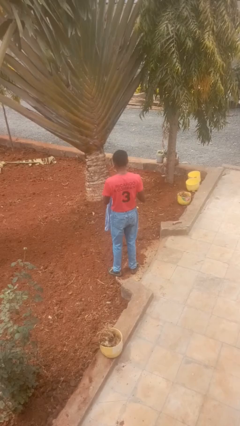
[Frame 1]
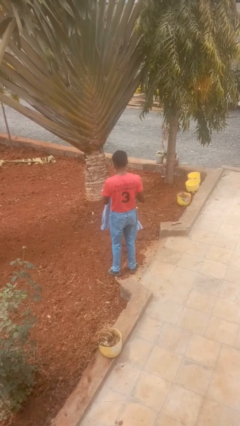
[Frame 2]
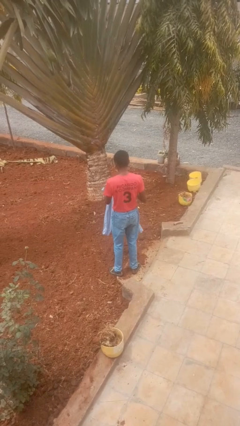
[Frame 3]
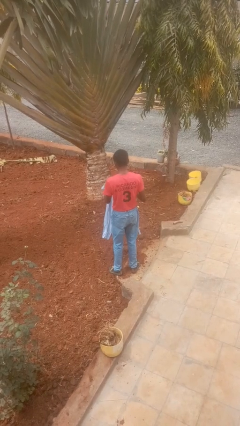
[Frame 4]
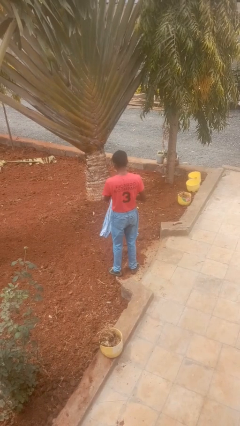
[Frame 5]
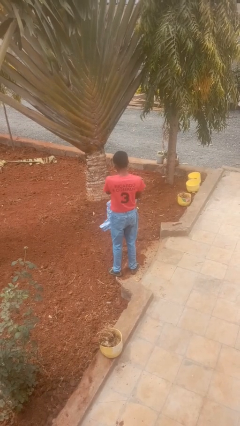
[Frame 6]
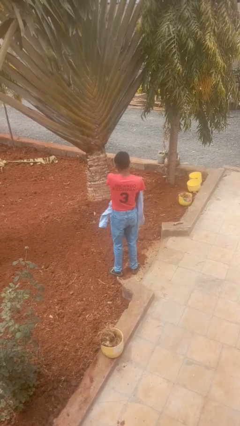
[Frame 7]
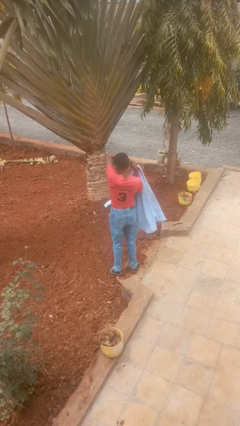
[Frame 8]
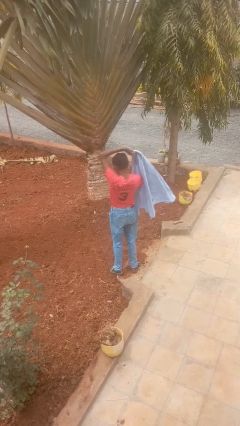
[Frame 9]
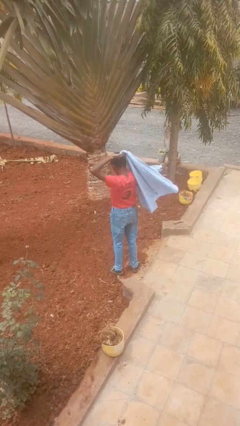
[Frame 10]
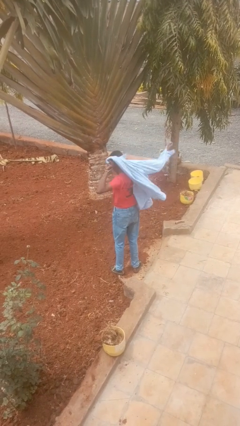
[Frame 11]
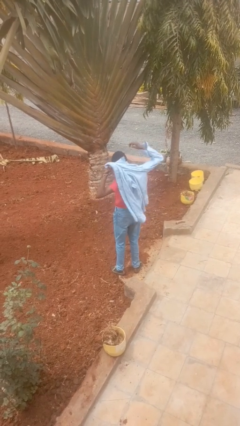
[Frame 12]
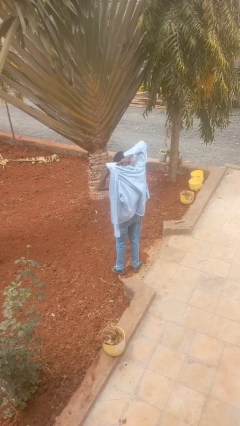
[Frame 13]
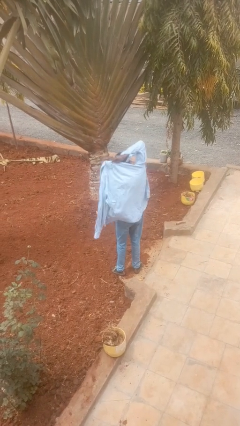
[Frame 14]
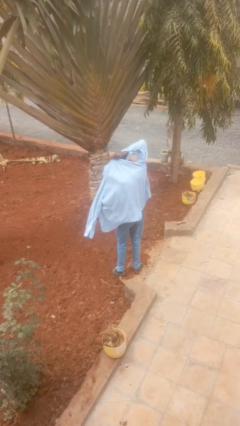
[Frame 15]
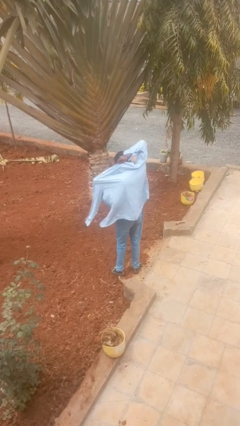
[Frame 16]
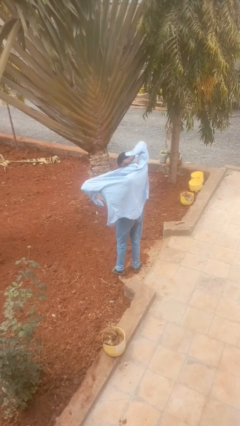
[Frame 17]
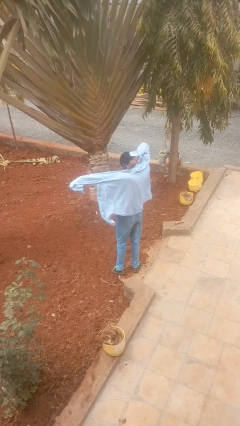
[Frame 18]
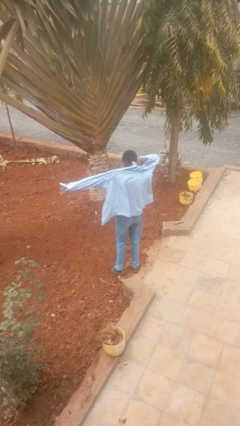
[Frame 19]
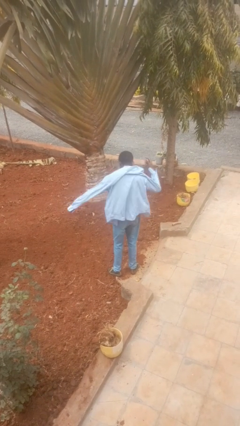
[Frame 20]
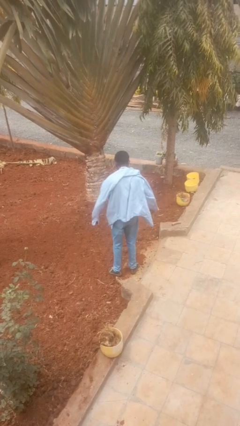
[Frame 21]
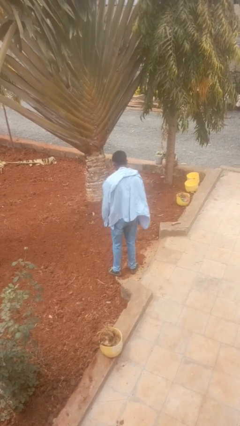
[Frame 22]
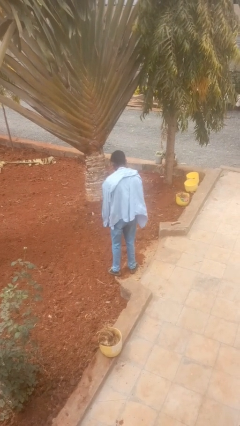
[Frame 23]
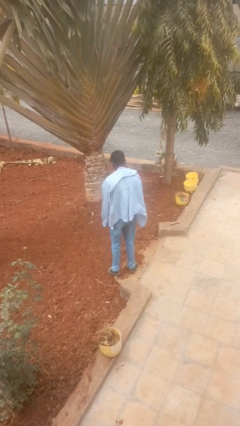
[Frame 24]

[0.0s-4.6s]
person puts on shirt

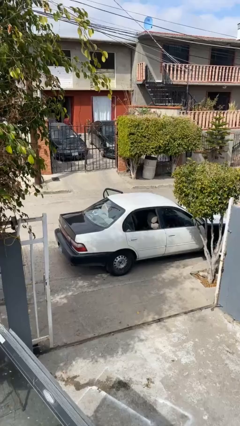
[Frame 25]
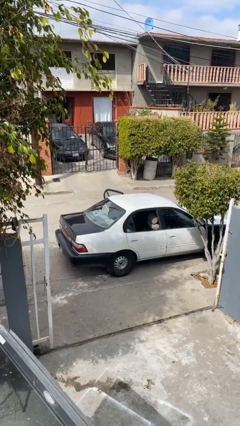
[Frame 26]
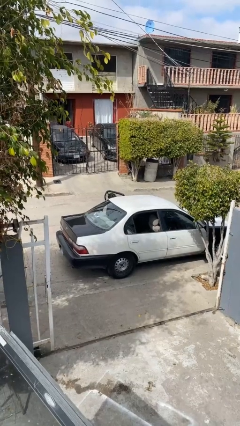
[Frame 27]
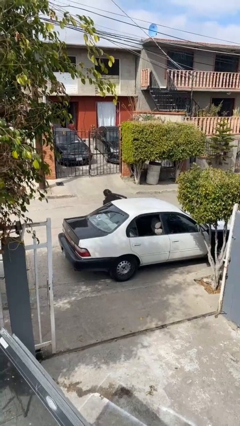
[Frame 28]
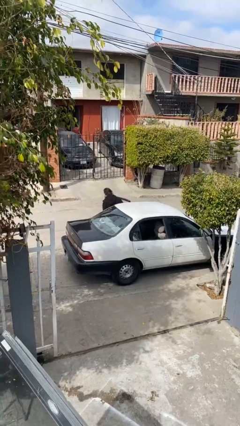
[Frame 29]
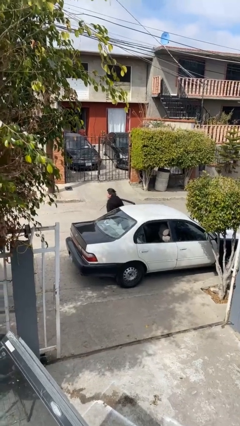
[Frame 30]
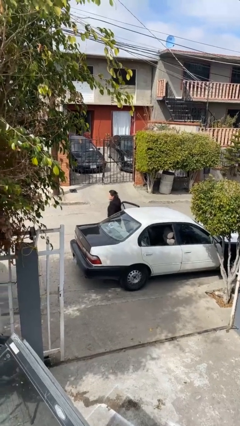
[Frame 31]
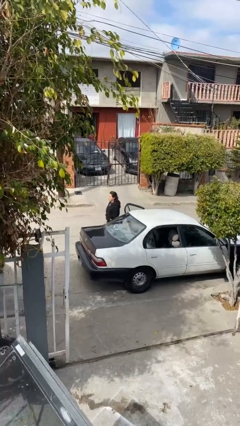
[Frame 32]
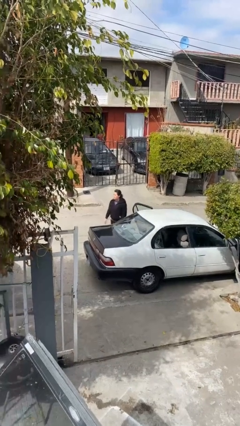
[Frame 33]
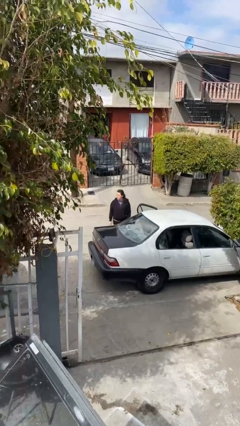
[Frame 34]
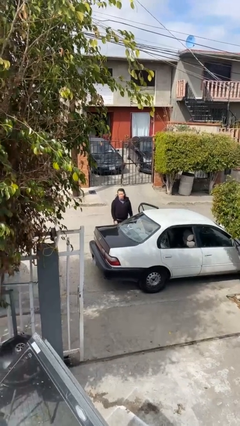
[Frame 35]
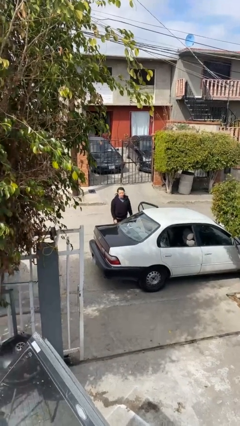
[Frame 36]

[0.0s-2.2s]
person exits car

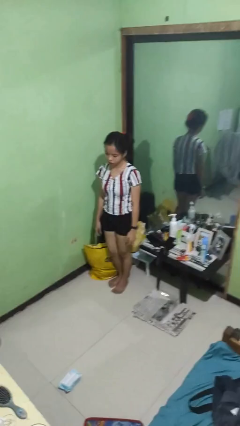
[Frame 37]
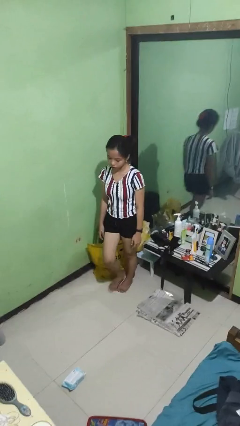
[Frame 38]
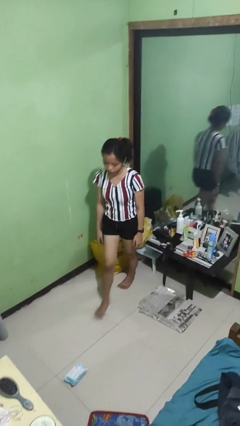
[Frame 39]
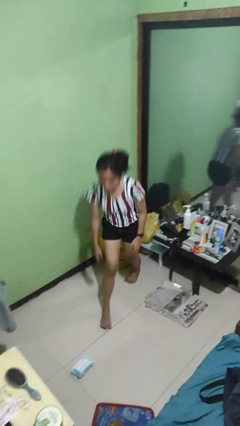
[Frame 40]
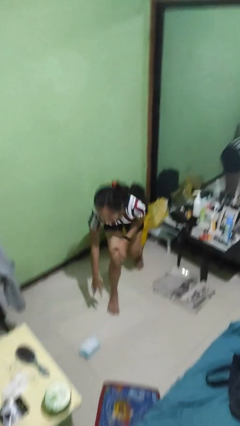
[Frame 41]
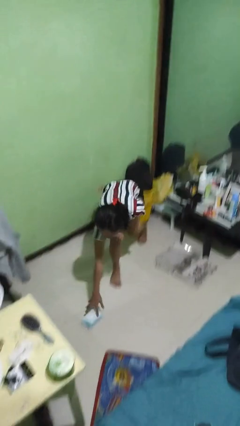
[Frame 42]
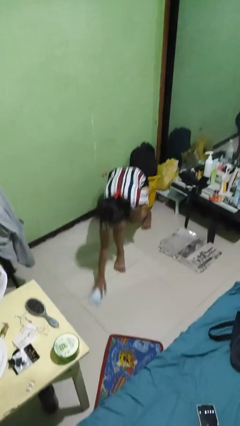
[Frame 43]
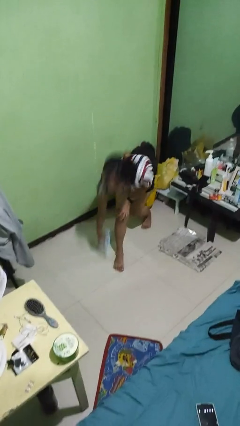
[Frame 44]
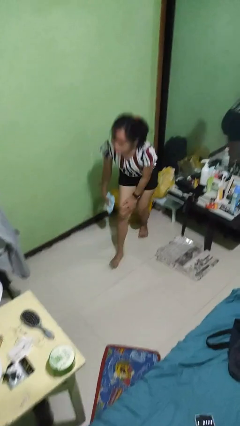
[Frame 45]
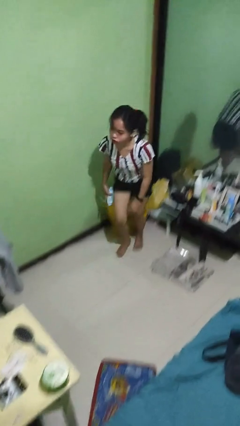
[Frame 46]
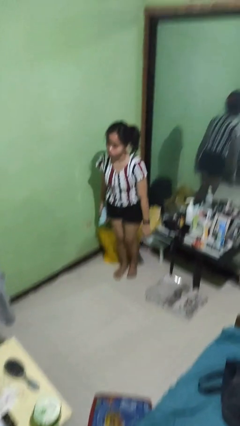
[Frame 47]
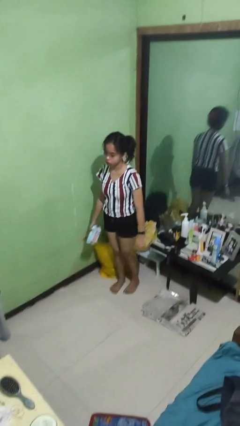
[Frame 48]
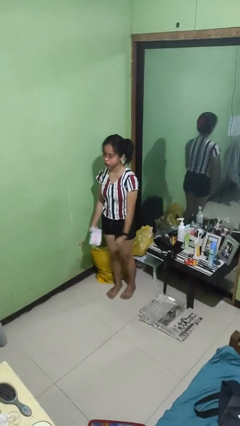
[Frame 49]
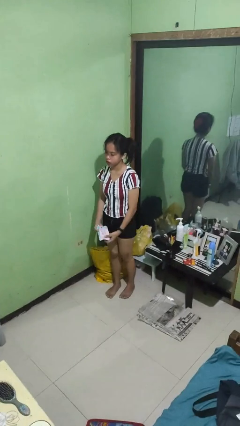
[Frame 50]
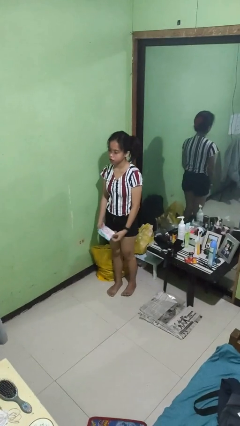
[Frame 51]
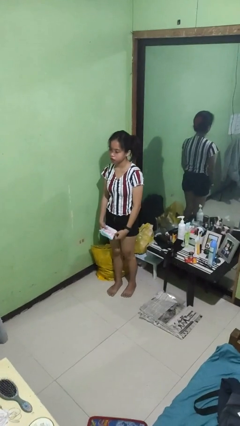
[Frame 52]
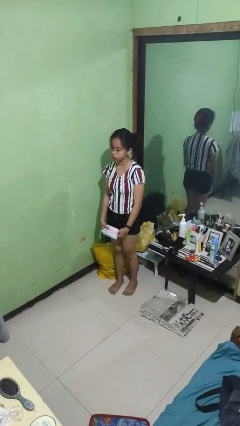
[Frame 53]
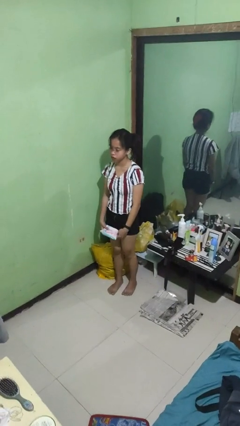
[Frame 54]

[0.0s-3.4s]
person picks up object from floor

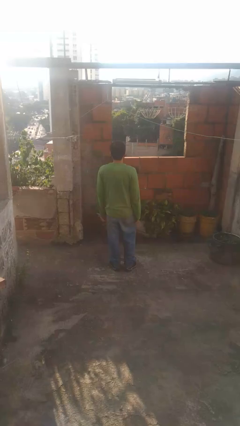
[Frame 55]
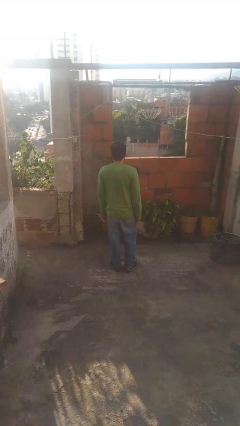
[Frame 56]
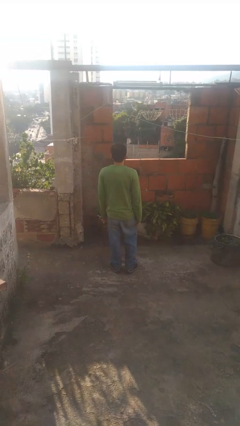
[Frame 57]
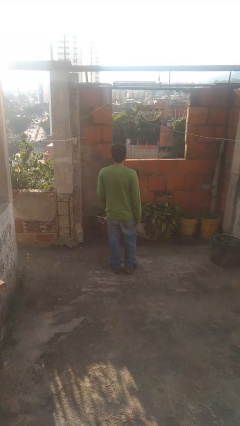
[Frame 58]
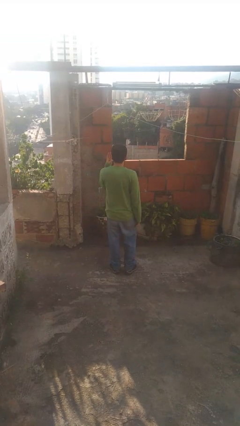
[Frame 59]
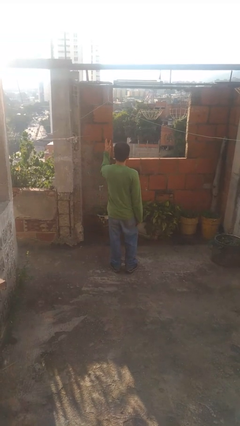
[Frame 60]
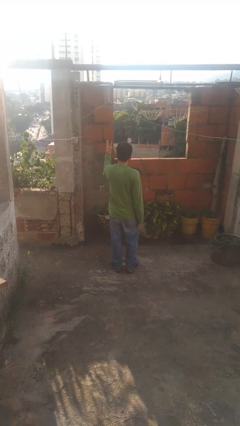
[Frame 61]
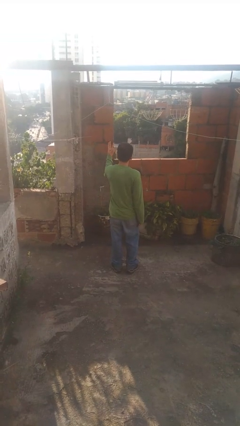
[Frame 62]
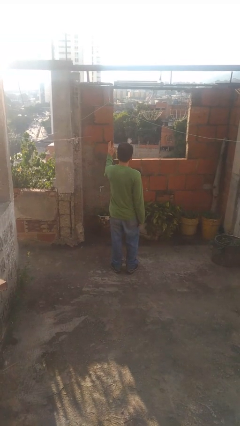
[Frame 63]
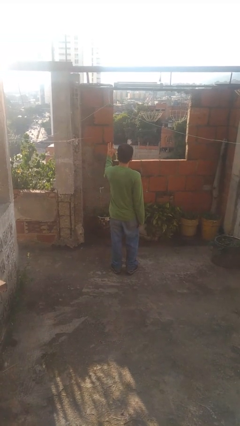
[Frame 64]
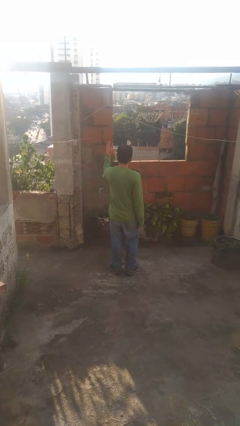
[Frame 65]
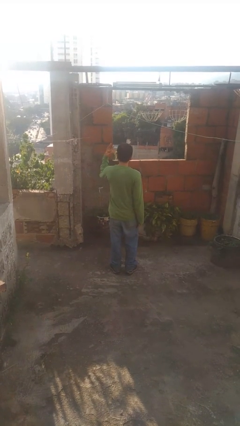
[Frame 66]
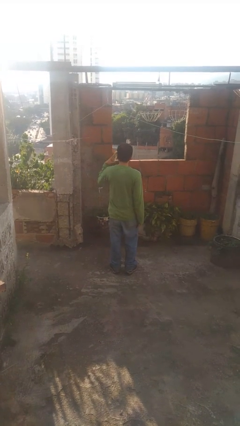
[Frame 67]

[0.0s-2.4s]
person gestures number three

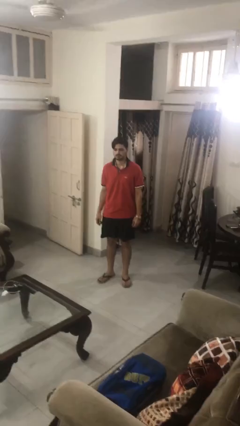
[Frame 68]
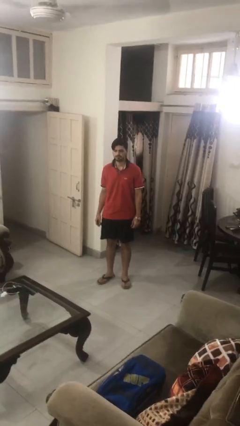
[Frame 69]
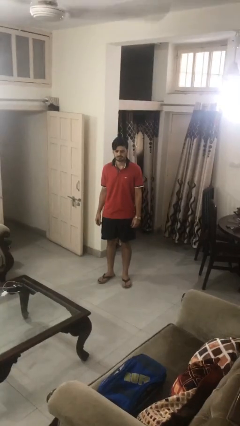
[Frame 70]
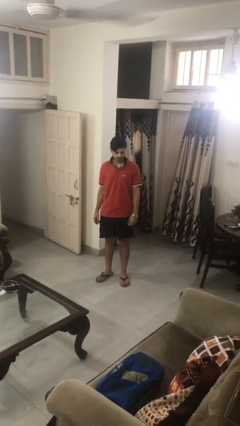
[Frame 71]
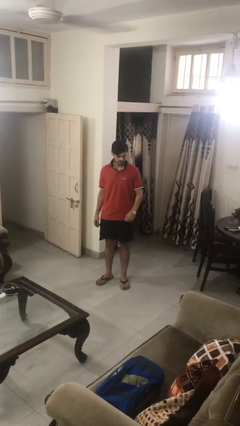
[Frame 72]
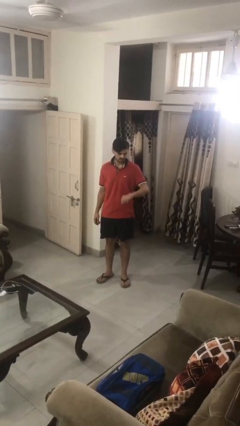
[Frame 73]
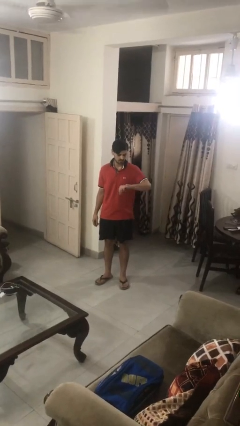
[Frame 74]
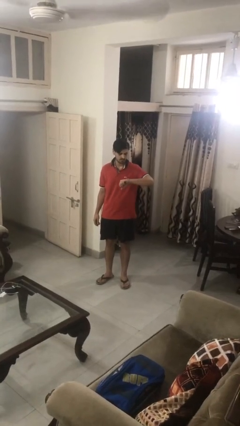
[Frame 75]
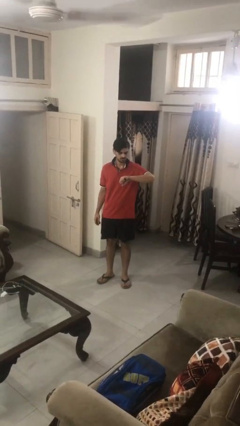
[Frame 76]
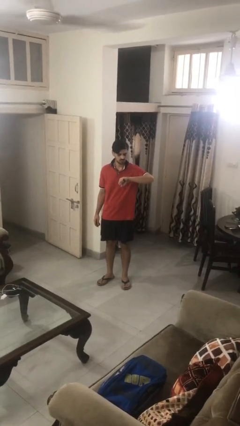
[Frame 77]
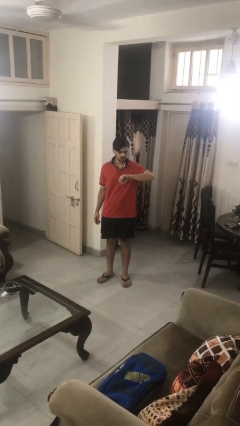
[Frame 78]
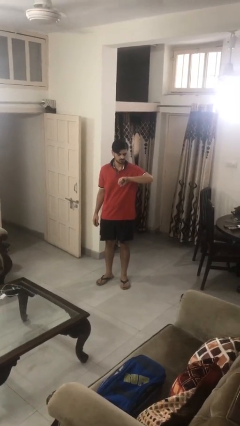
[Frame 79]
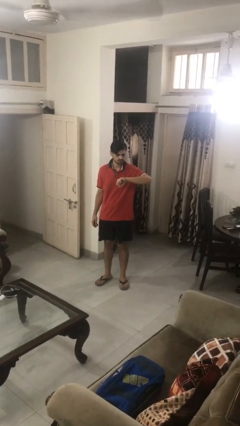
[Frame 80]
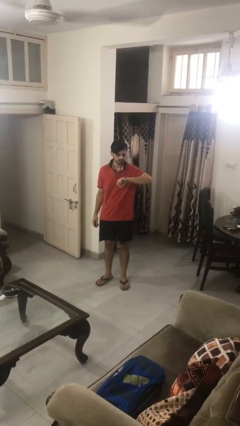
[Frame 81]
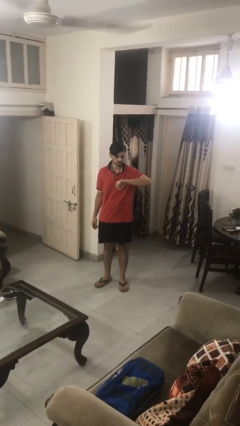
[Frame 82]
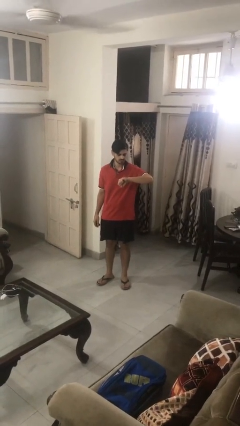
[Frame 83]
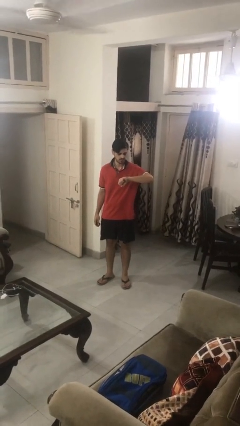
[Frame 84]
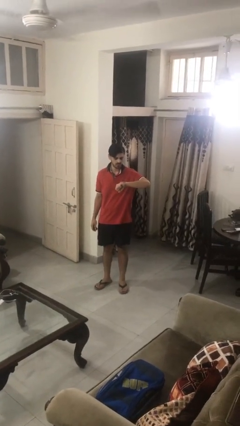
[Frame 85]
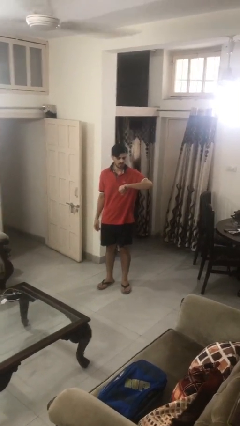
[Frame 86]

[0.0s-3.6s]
person looks at wristwatch

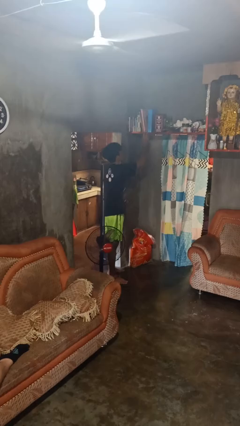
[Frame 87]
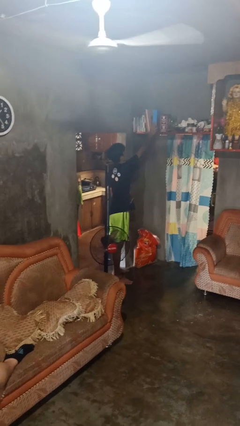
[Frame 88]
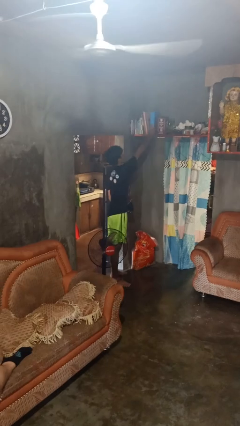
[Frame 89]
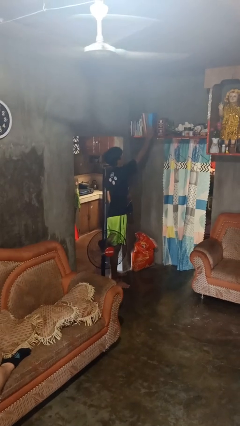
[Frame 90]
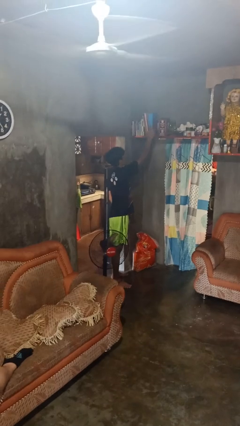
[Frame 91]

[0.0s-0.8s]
person picks up object from shelf

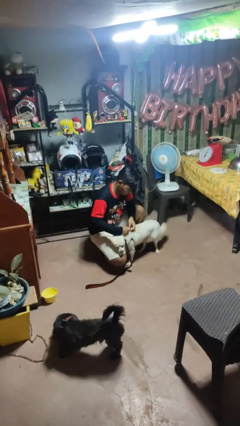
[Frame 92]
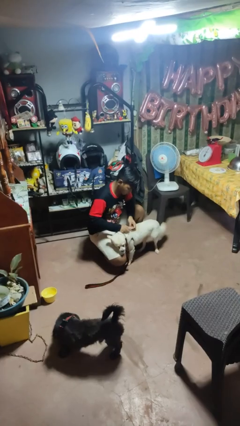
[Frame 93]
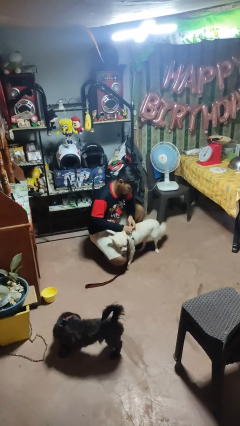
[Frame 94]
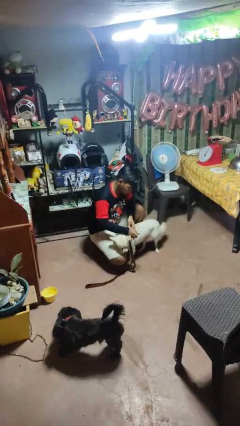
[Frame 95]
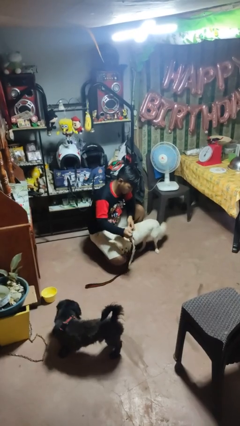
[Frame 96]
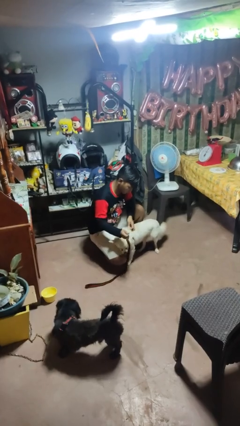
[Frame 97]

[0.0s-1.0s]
person unattaches leash from dog
